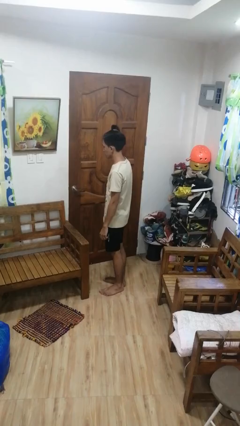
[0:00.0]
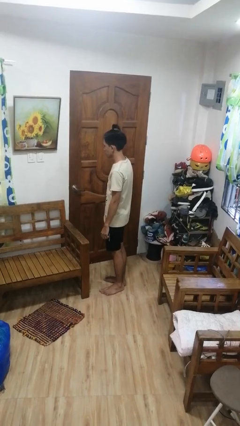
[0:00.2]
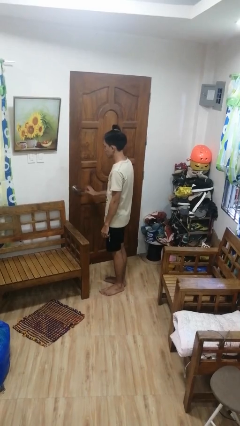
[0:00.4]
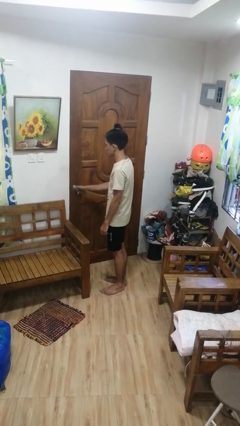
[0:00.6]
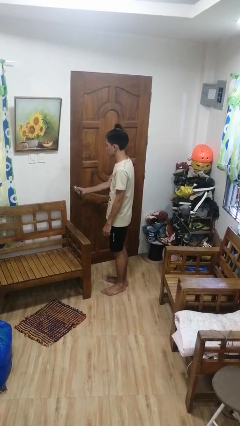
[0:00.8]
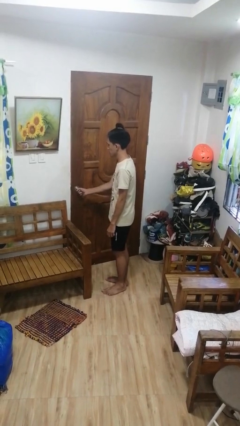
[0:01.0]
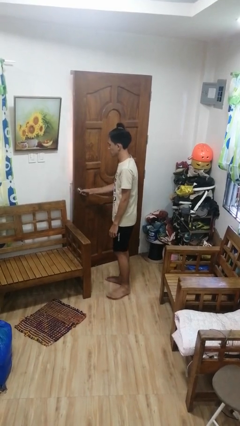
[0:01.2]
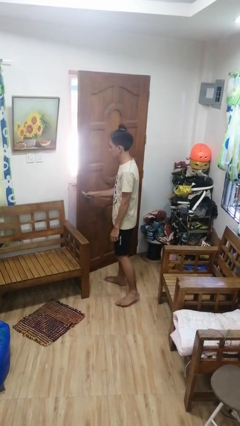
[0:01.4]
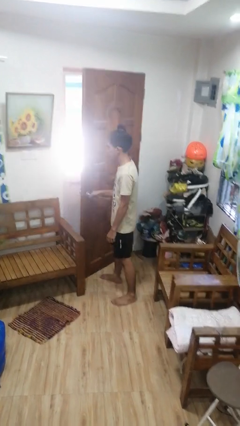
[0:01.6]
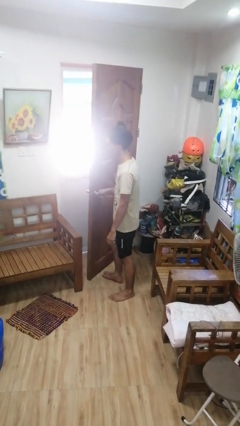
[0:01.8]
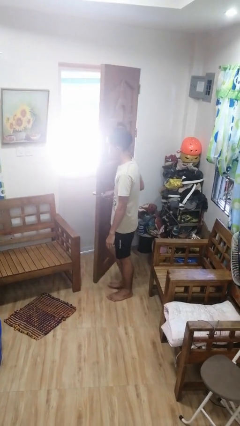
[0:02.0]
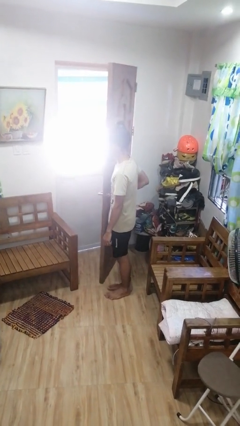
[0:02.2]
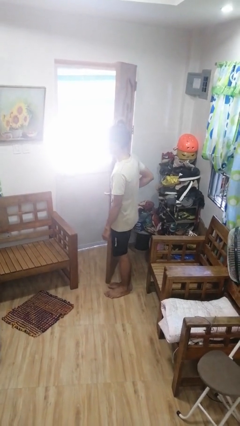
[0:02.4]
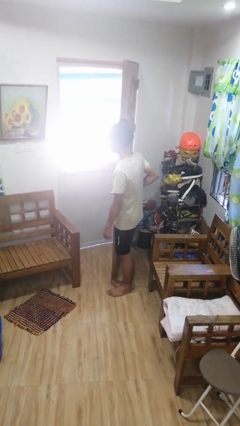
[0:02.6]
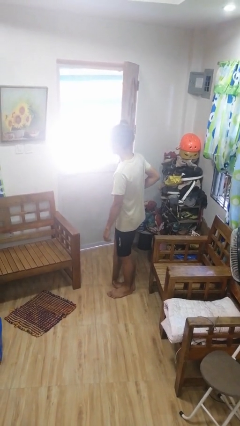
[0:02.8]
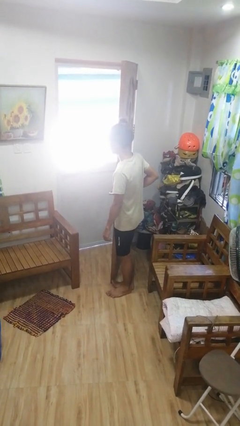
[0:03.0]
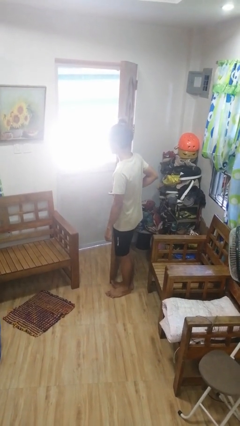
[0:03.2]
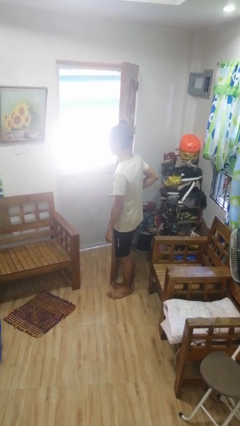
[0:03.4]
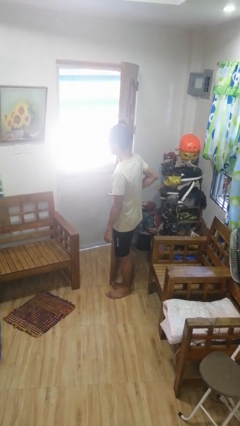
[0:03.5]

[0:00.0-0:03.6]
person opens facility door

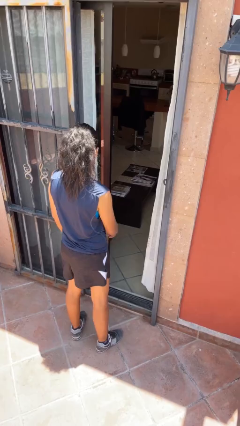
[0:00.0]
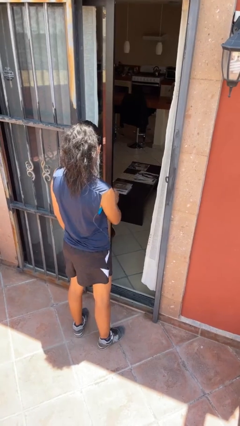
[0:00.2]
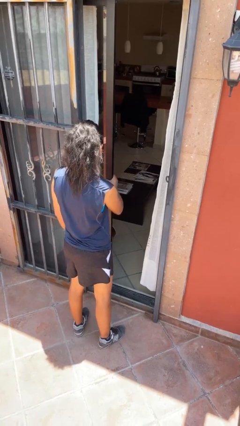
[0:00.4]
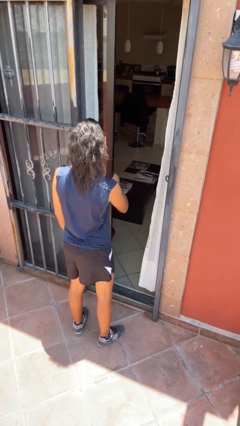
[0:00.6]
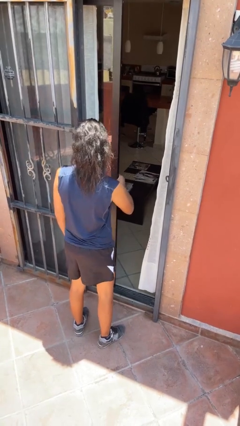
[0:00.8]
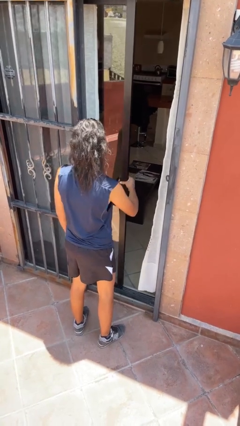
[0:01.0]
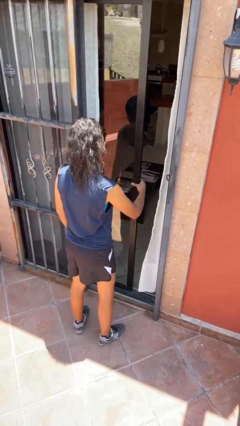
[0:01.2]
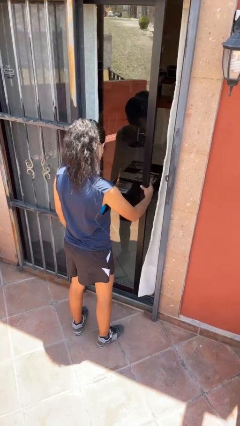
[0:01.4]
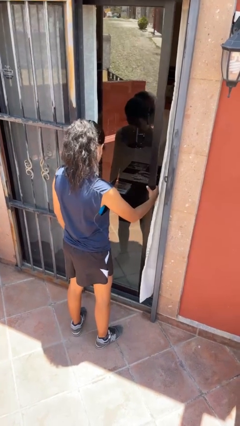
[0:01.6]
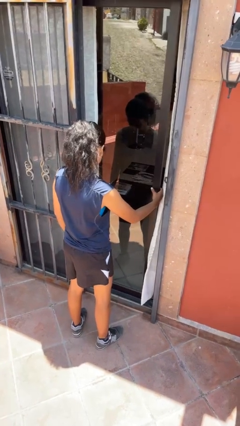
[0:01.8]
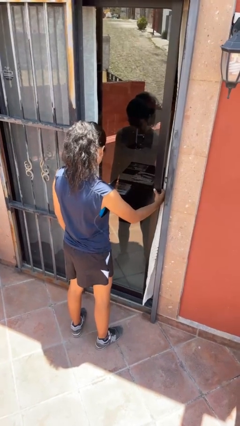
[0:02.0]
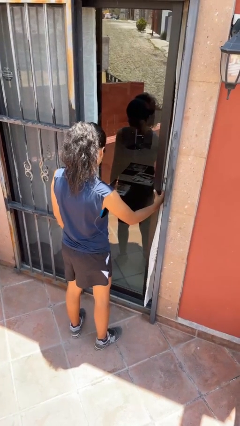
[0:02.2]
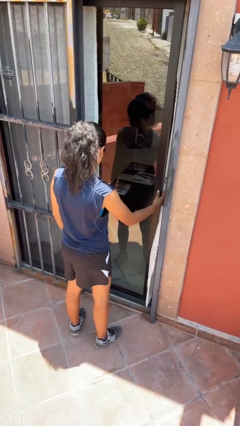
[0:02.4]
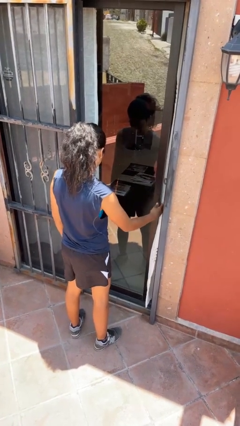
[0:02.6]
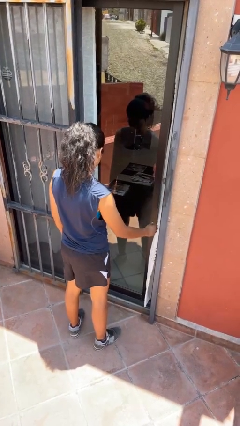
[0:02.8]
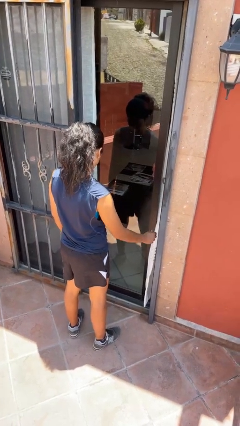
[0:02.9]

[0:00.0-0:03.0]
person closes sliding door

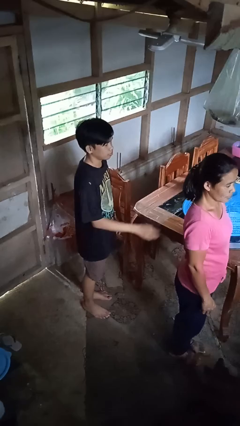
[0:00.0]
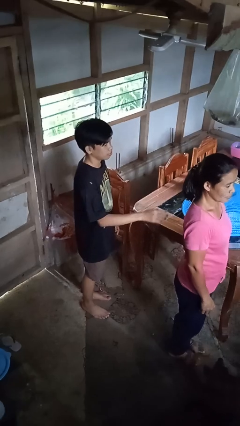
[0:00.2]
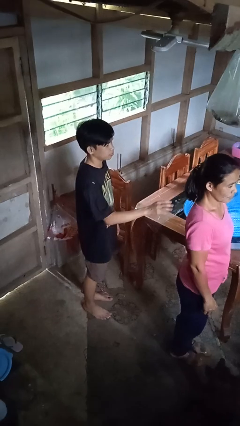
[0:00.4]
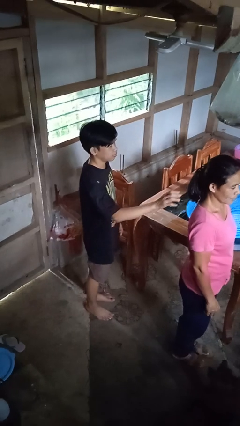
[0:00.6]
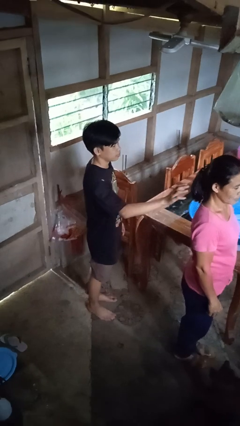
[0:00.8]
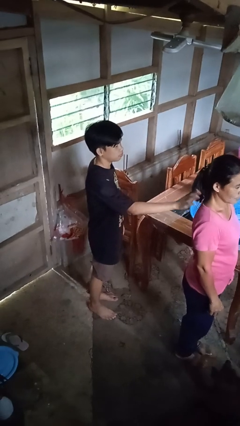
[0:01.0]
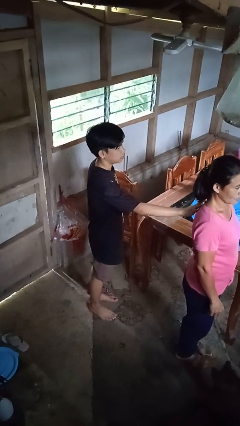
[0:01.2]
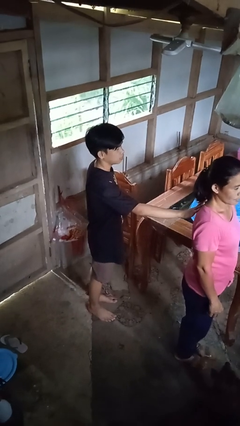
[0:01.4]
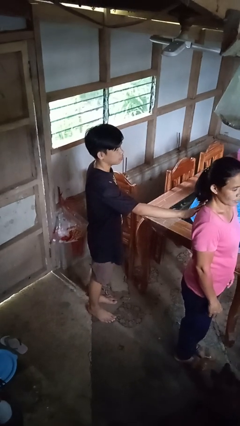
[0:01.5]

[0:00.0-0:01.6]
person touches back of person

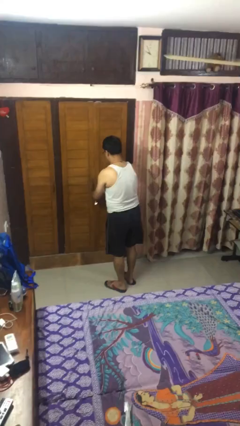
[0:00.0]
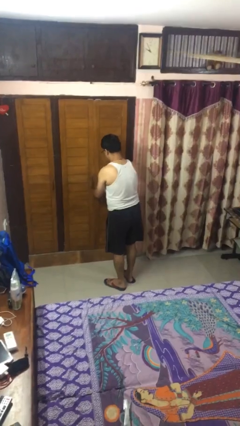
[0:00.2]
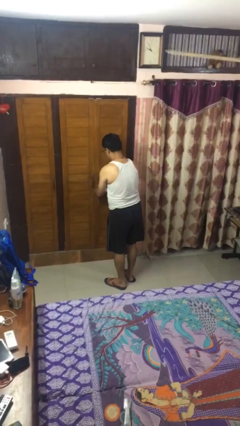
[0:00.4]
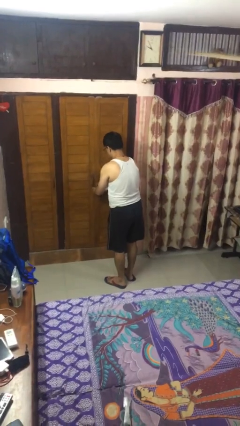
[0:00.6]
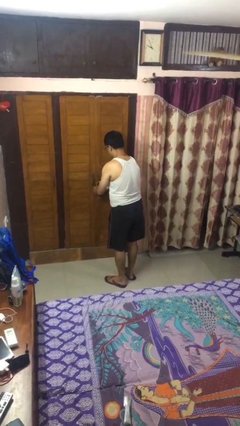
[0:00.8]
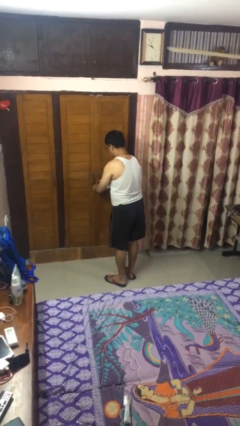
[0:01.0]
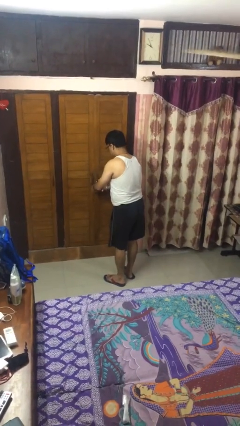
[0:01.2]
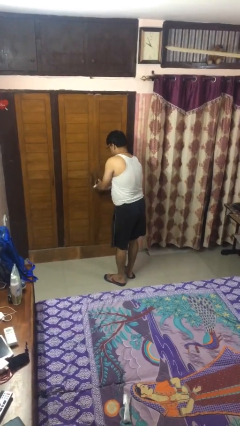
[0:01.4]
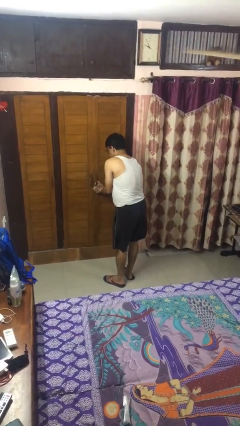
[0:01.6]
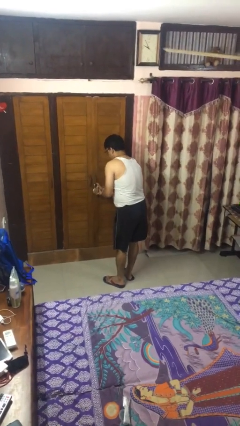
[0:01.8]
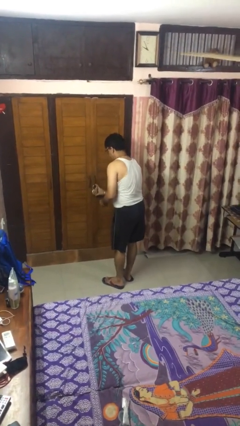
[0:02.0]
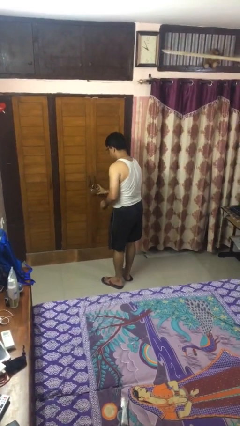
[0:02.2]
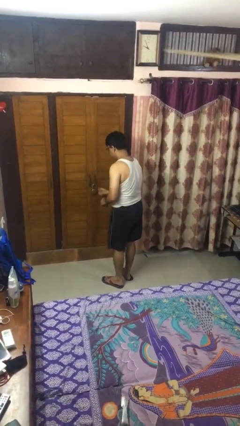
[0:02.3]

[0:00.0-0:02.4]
person locks door with keys

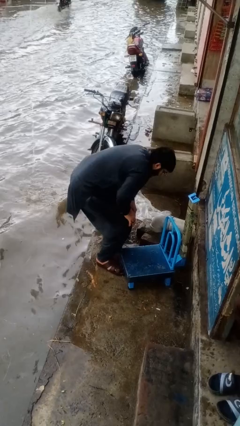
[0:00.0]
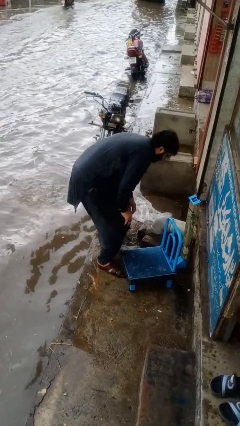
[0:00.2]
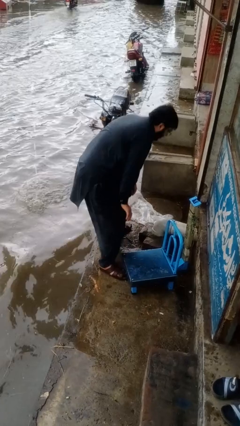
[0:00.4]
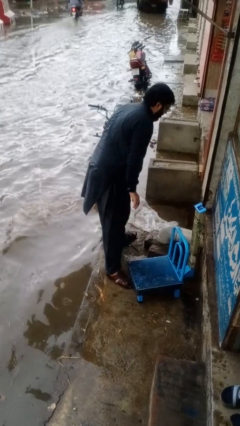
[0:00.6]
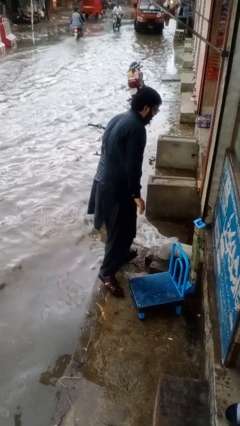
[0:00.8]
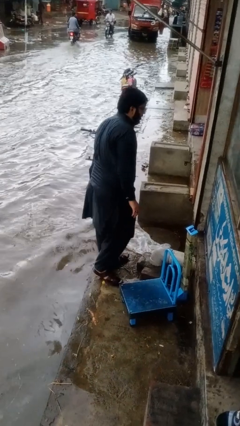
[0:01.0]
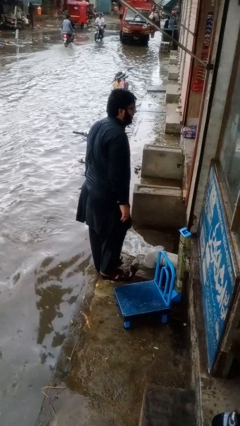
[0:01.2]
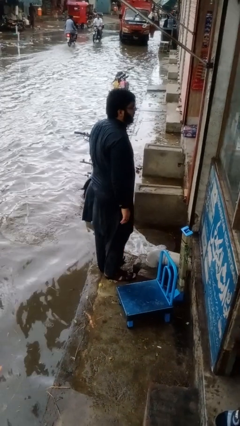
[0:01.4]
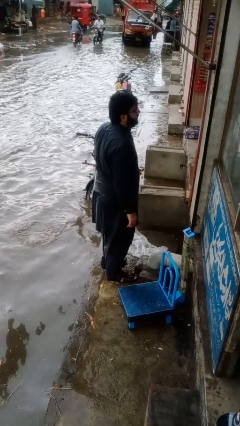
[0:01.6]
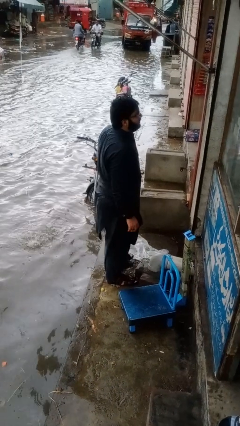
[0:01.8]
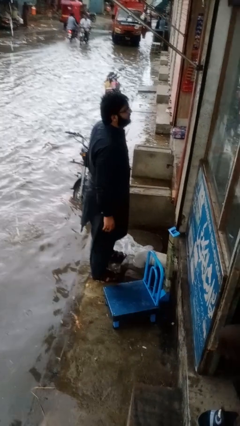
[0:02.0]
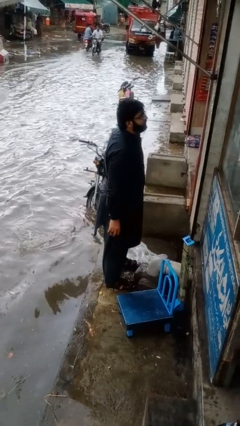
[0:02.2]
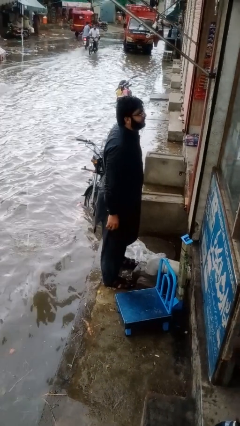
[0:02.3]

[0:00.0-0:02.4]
person stands up from floor

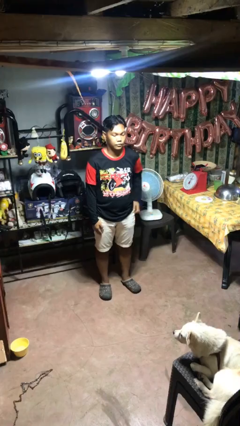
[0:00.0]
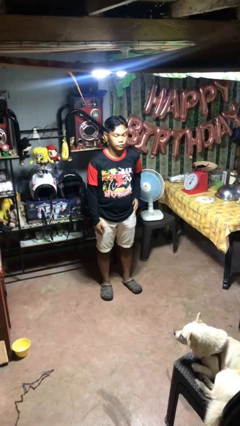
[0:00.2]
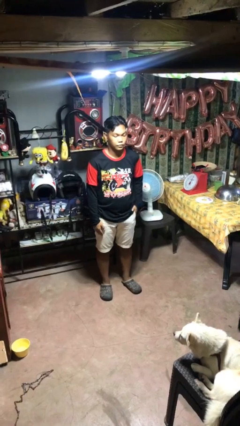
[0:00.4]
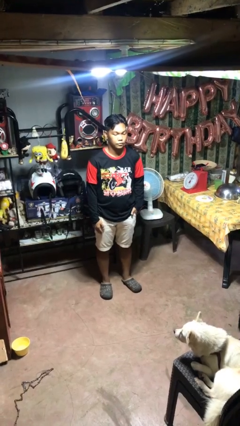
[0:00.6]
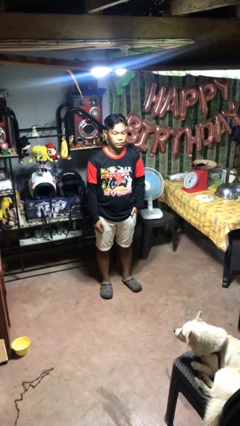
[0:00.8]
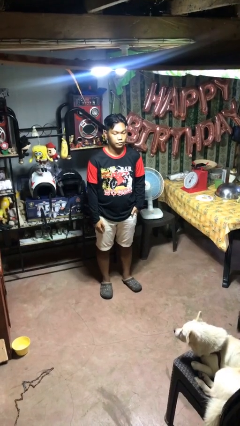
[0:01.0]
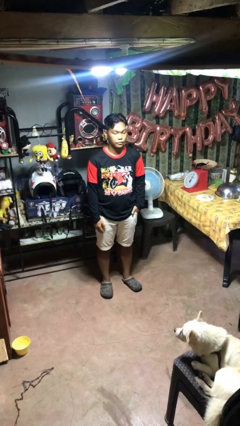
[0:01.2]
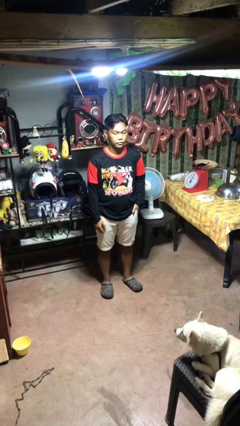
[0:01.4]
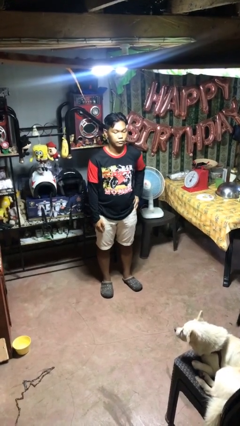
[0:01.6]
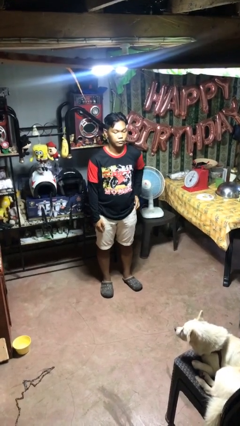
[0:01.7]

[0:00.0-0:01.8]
person puts hands in back pockets

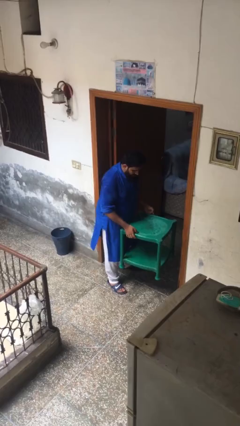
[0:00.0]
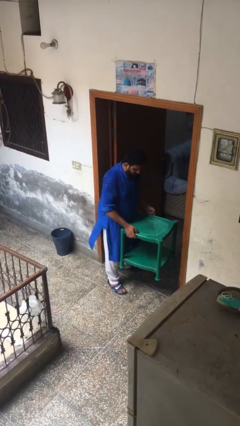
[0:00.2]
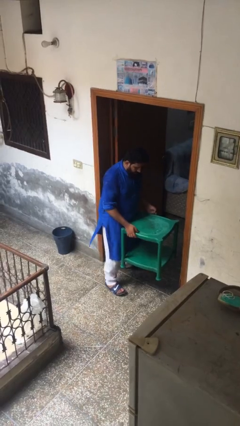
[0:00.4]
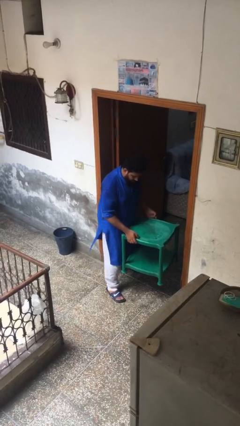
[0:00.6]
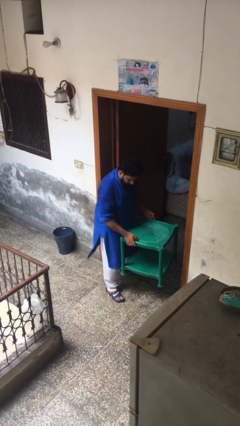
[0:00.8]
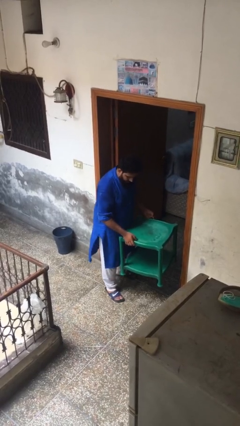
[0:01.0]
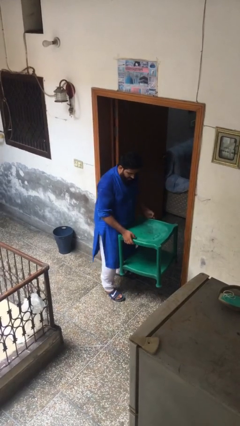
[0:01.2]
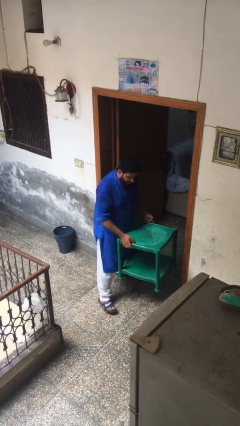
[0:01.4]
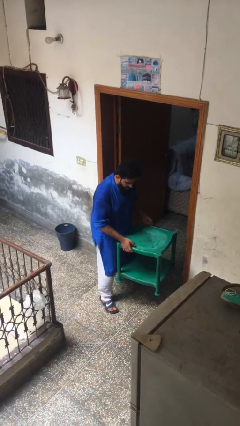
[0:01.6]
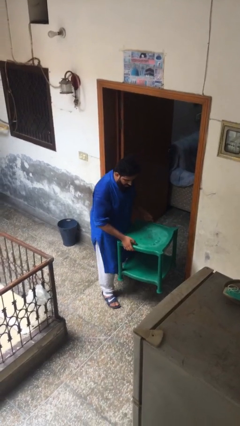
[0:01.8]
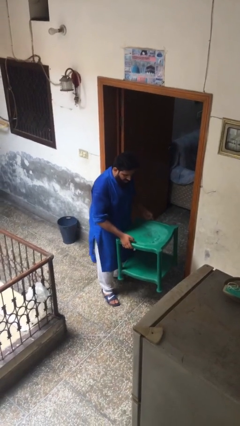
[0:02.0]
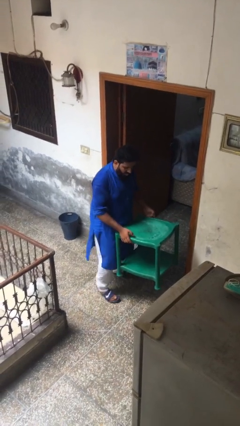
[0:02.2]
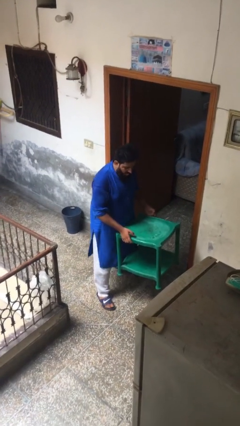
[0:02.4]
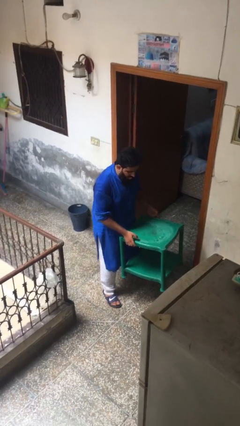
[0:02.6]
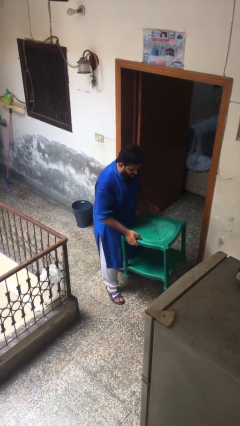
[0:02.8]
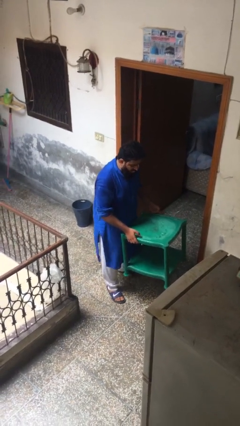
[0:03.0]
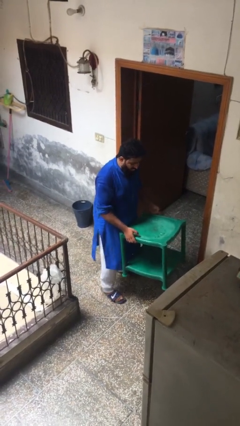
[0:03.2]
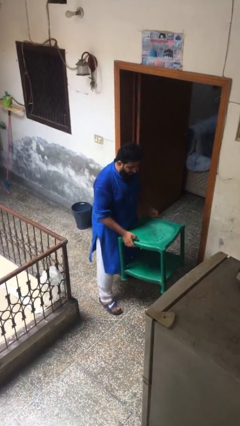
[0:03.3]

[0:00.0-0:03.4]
person carries heavy object
